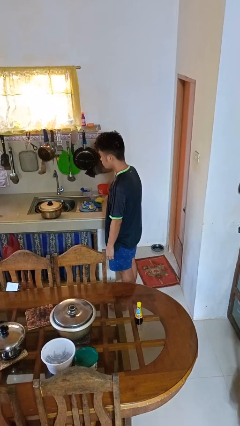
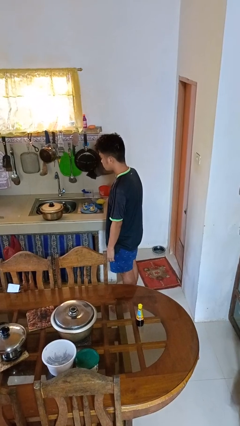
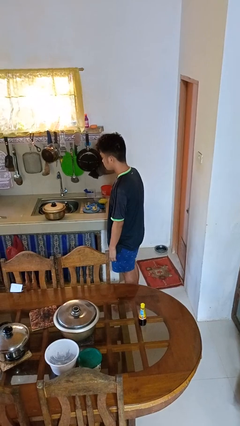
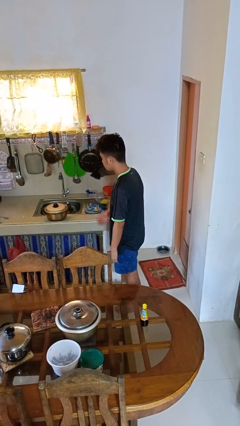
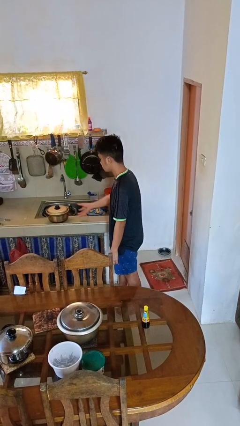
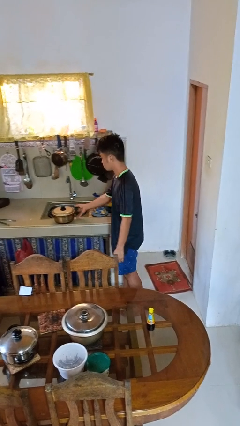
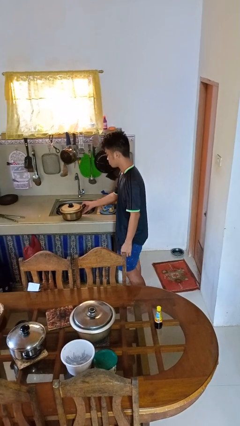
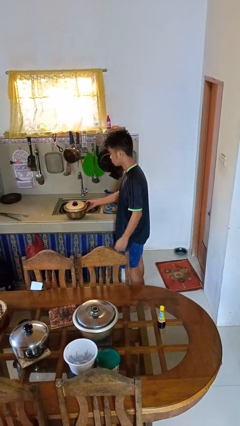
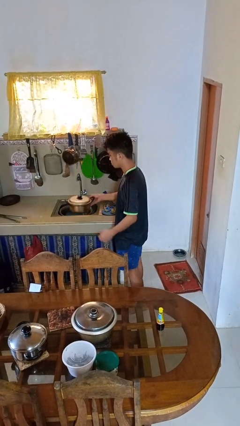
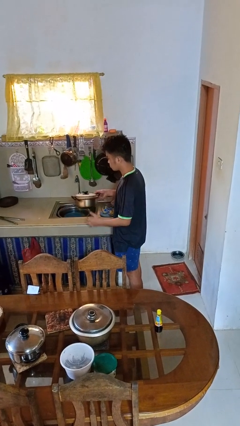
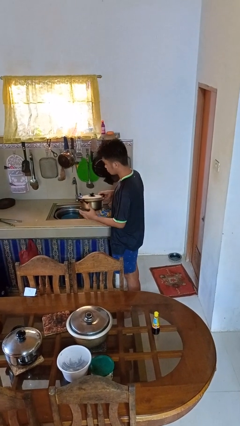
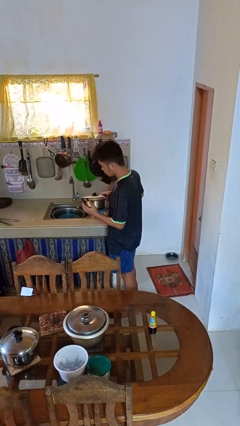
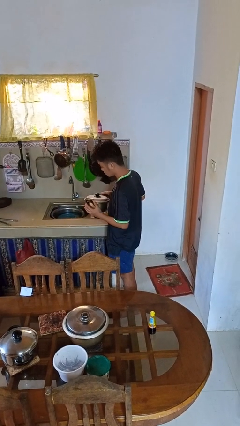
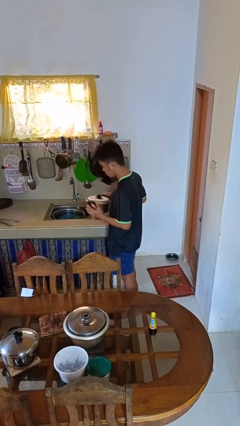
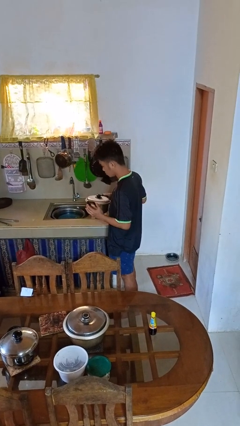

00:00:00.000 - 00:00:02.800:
person picks up object from countertop

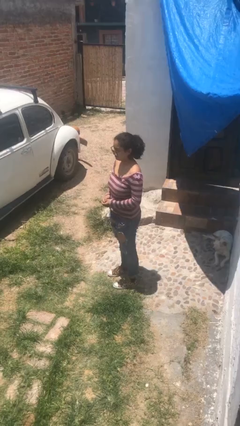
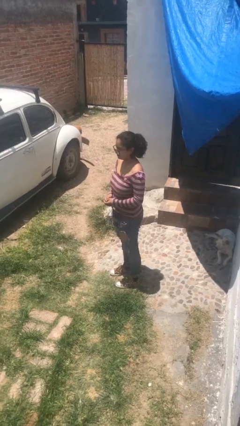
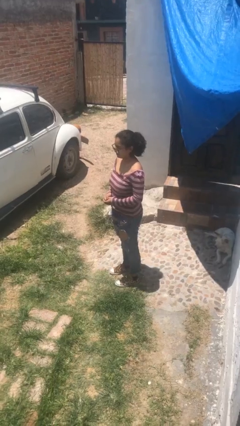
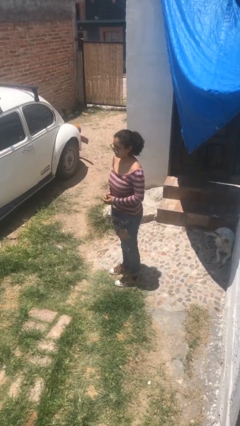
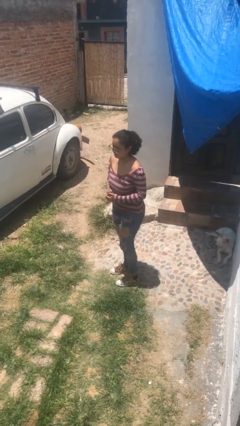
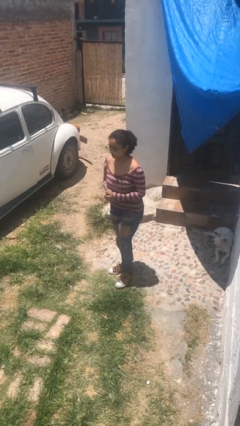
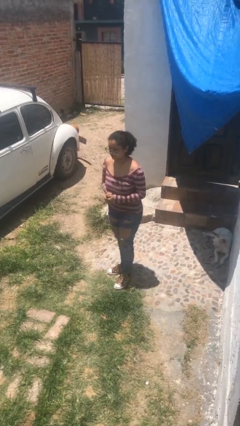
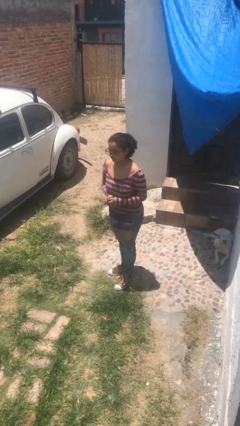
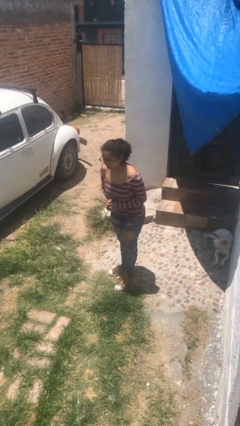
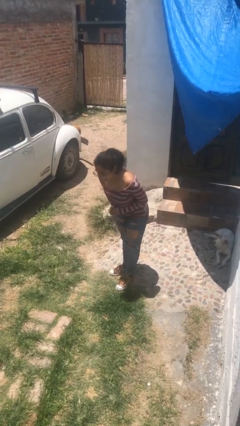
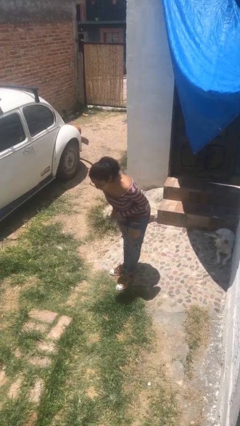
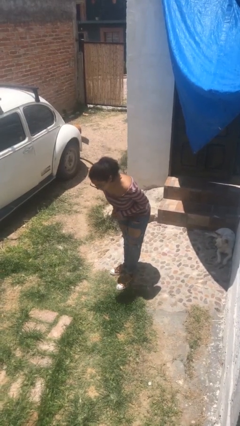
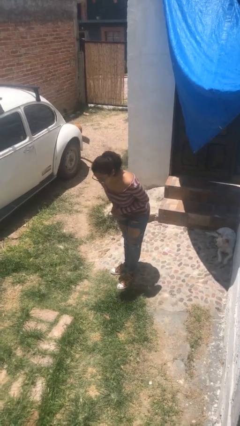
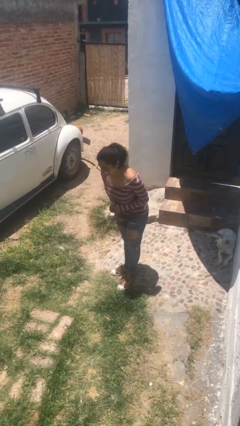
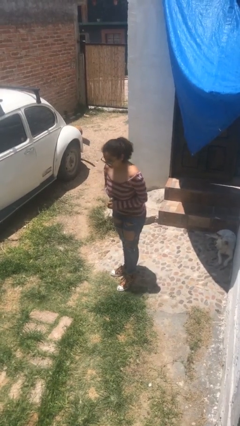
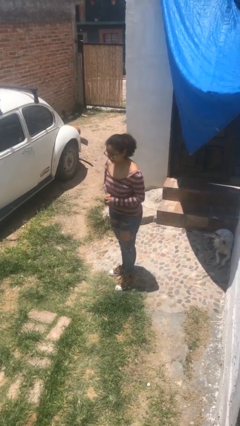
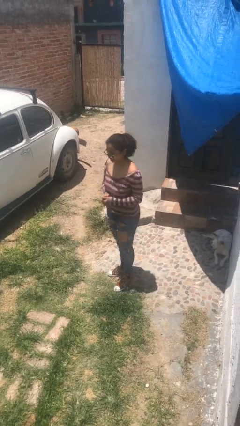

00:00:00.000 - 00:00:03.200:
person bows

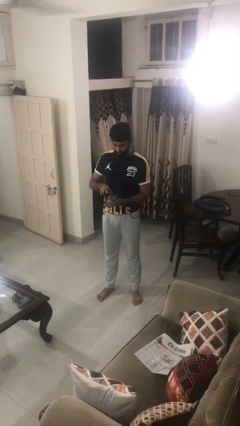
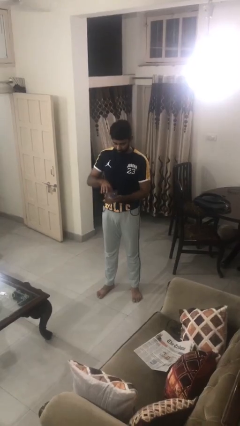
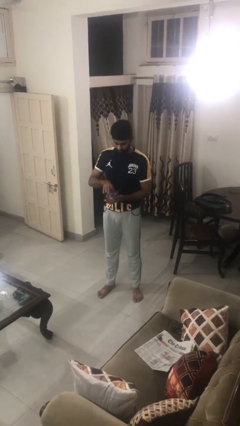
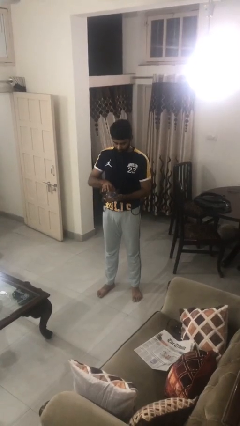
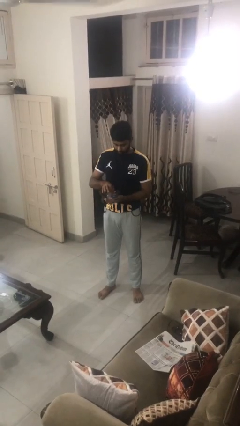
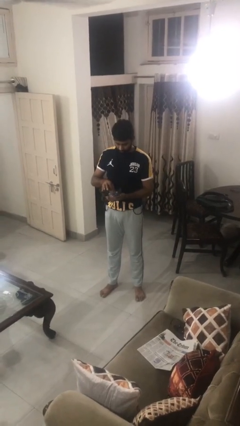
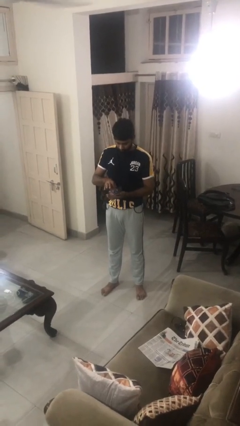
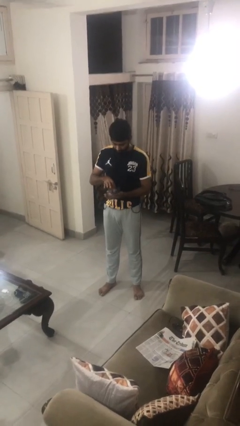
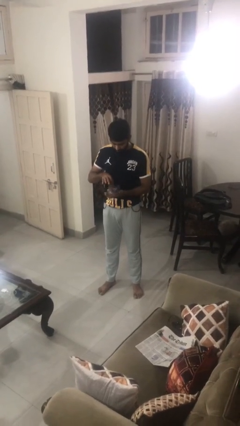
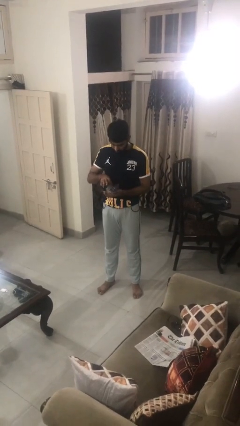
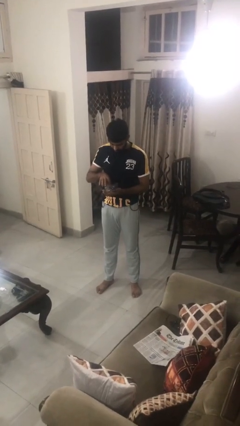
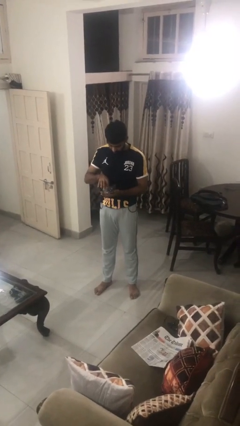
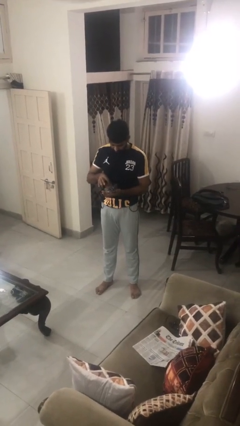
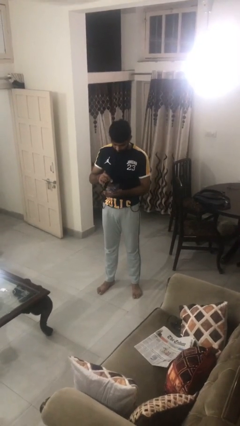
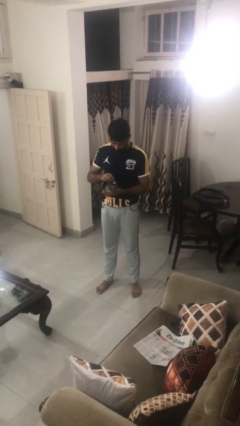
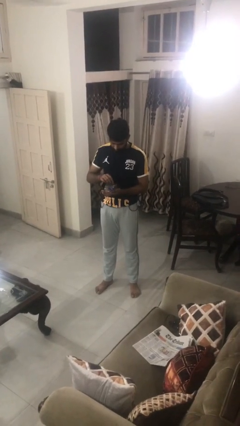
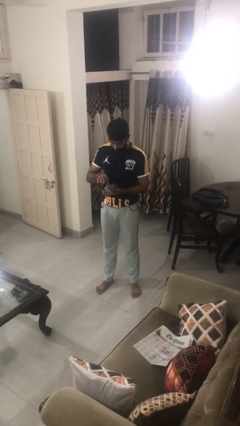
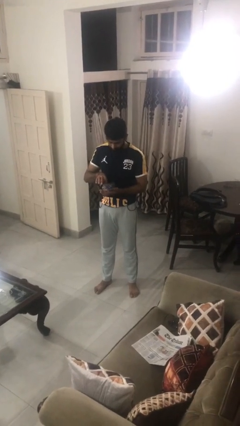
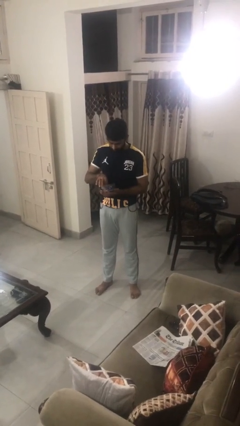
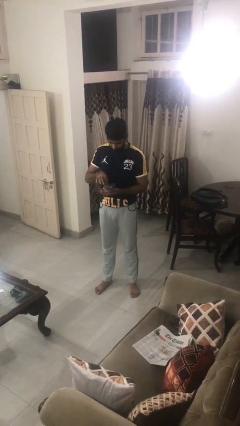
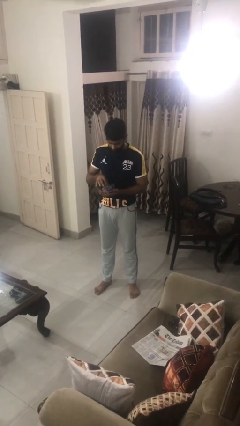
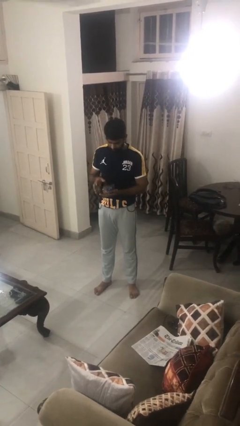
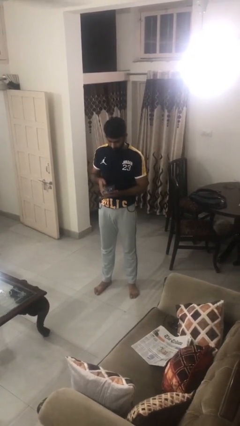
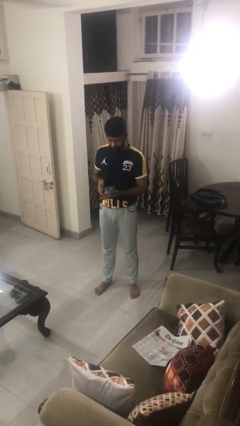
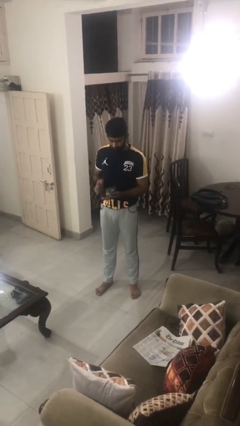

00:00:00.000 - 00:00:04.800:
person searches jewelry box

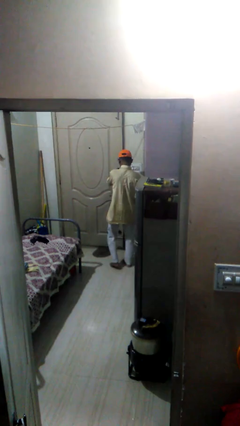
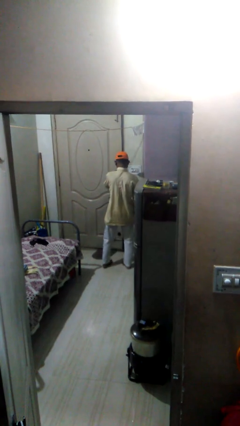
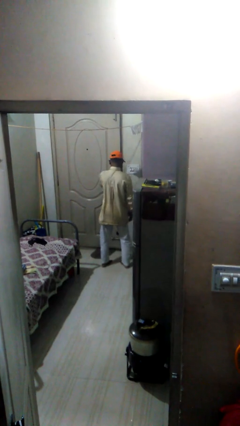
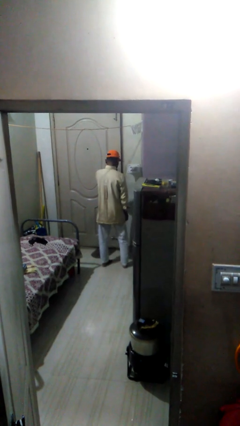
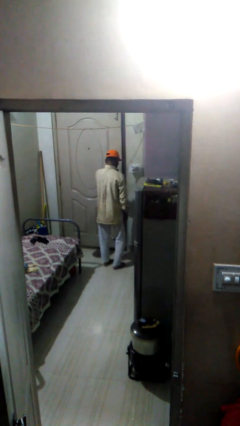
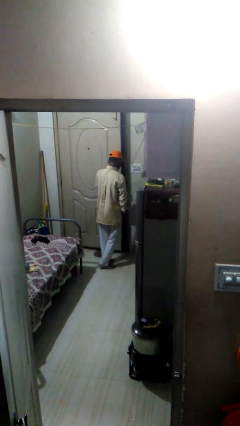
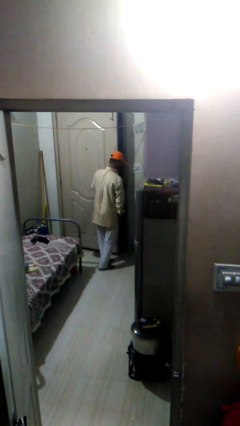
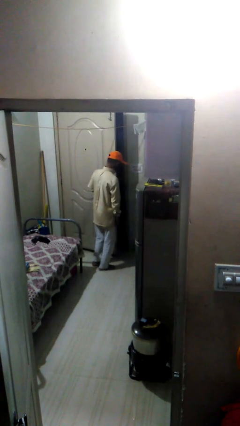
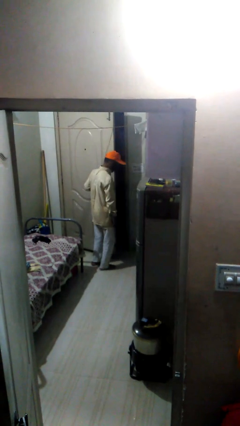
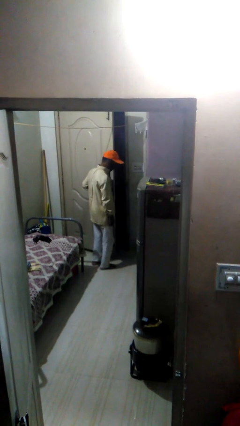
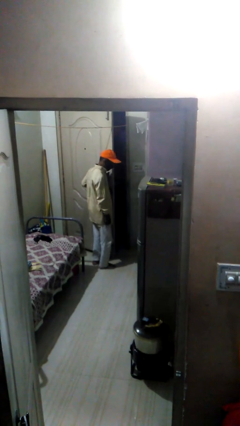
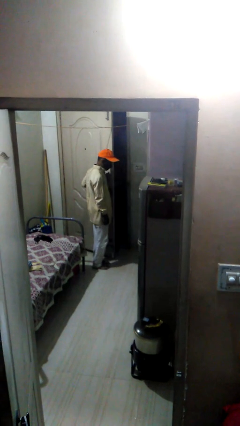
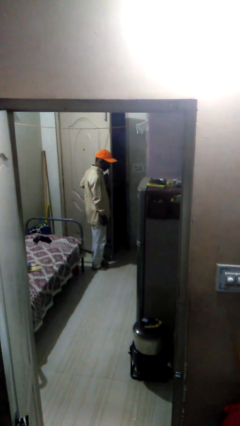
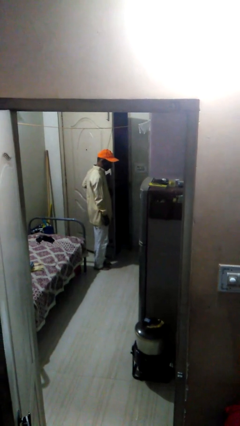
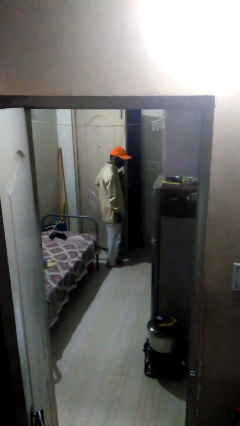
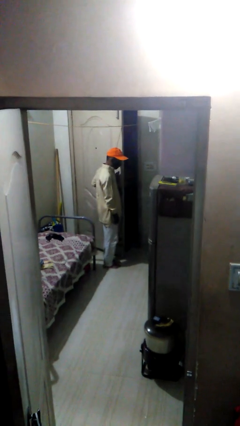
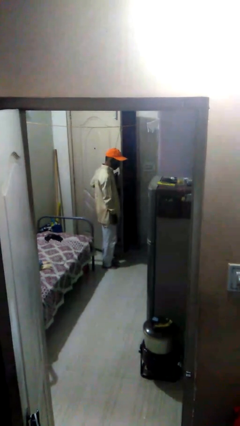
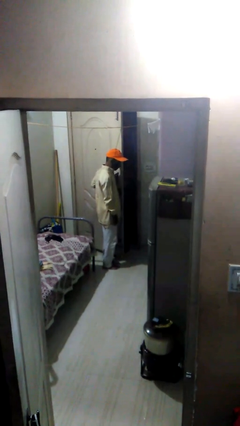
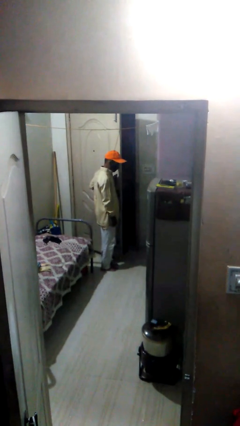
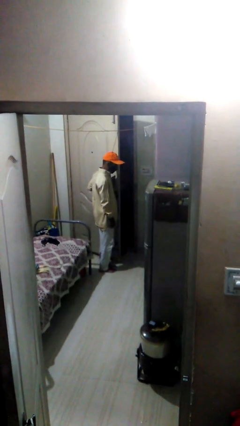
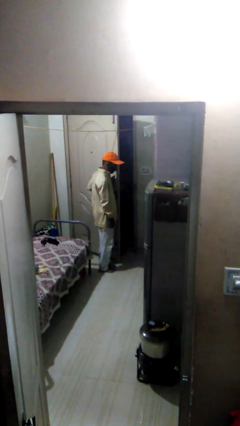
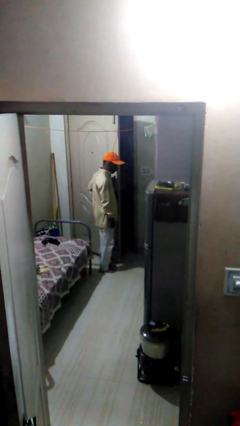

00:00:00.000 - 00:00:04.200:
person opens facility door

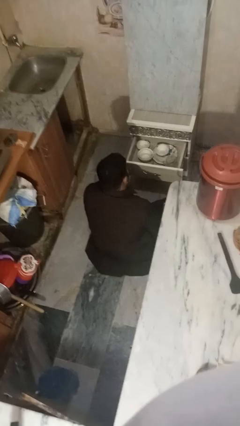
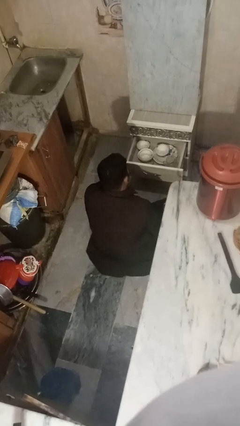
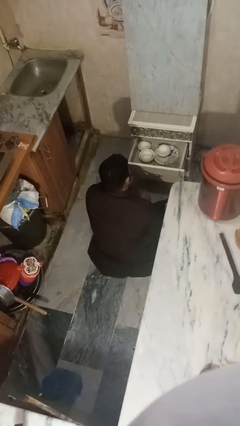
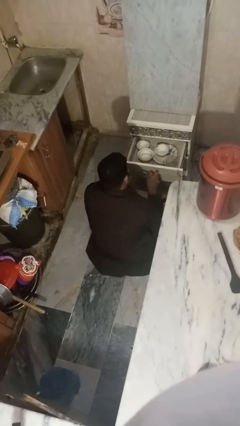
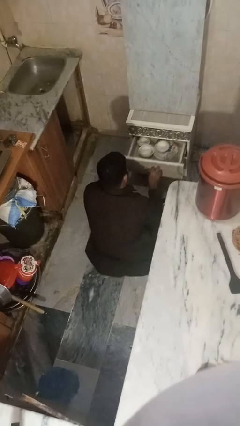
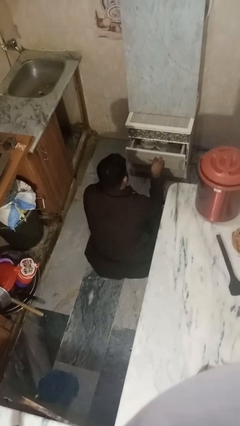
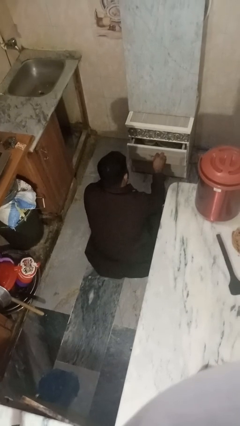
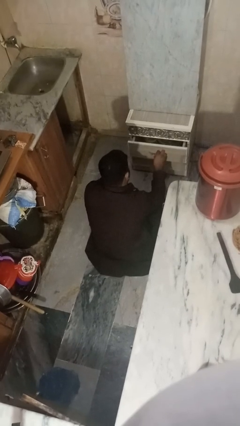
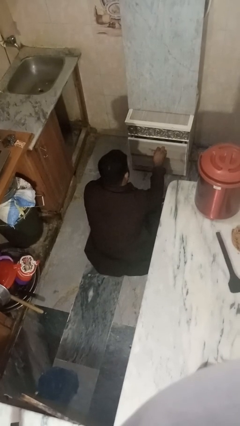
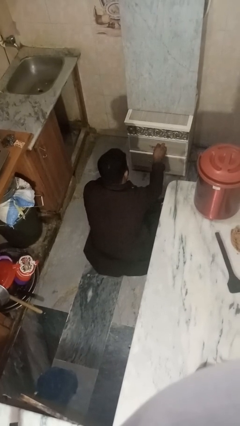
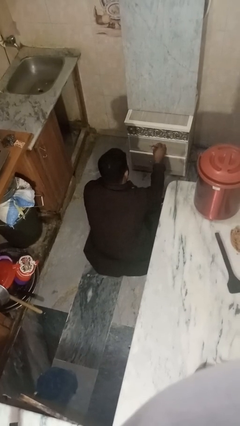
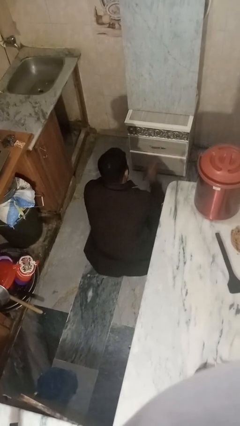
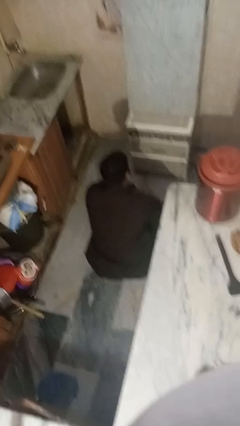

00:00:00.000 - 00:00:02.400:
person closes kitchen drawer

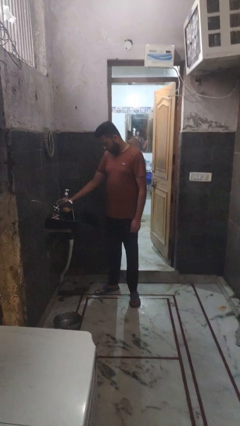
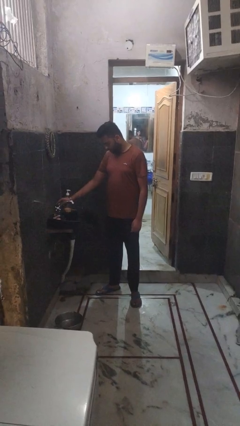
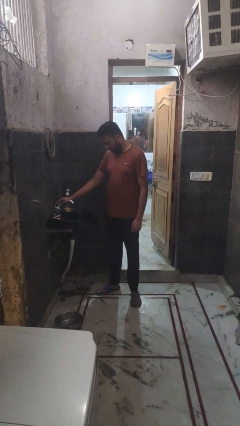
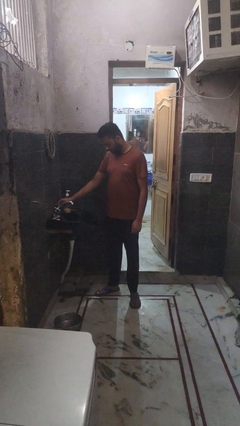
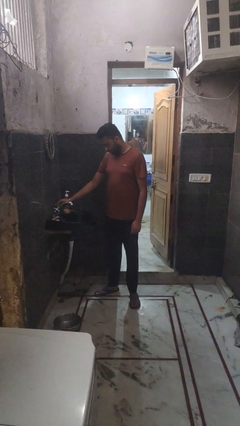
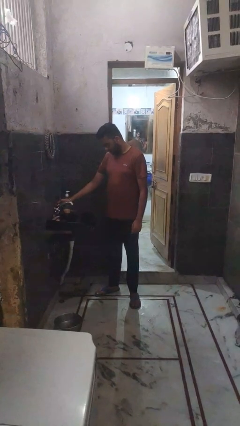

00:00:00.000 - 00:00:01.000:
person turns off faucet
